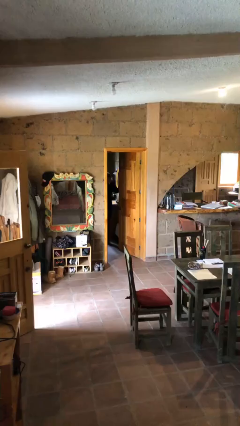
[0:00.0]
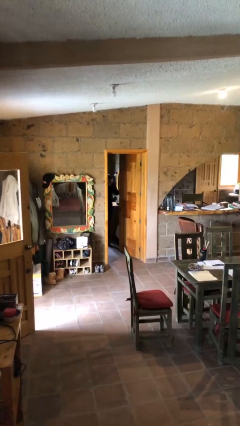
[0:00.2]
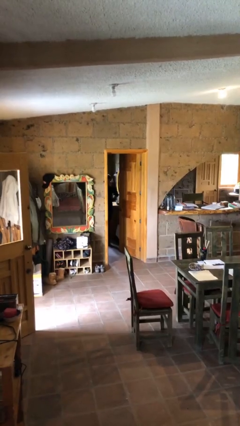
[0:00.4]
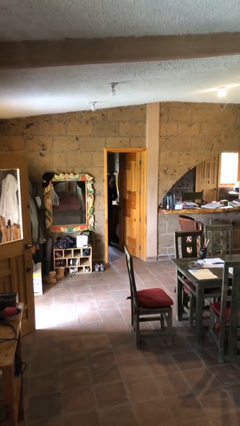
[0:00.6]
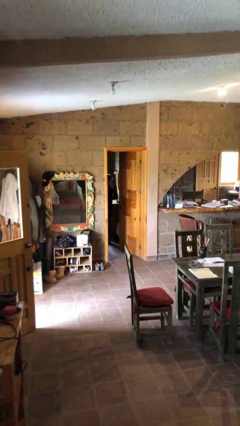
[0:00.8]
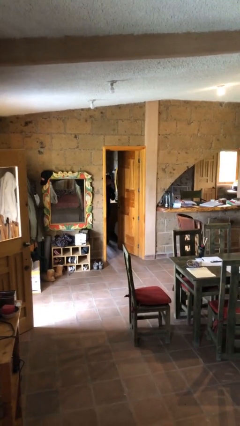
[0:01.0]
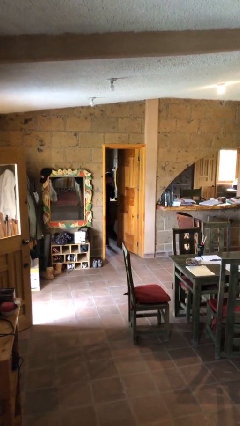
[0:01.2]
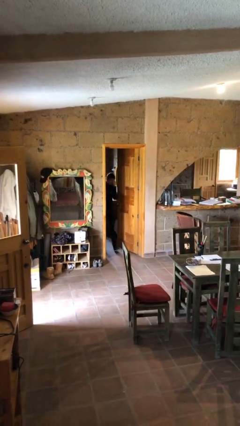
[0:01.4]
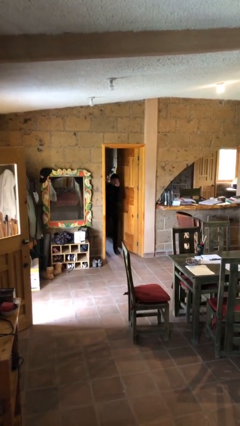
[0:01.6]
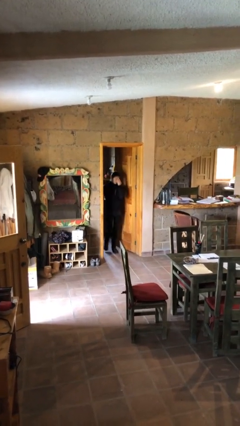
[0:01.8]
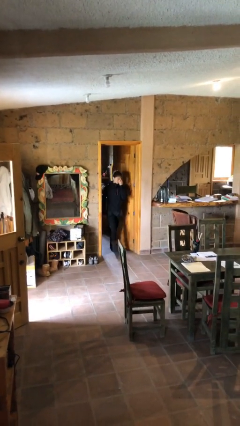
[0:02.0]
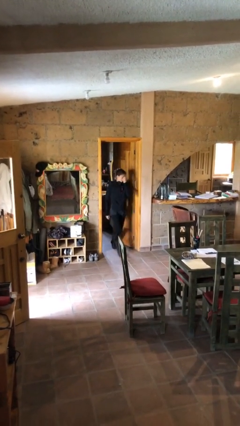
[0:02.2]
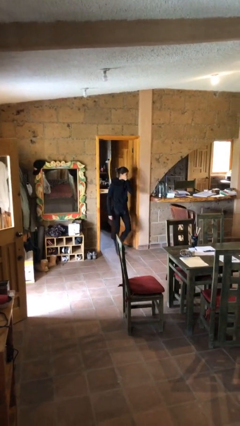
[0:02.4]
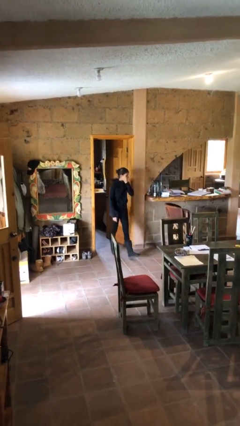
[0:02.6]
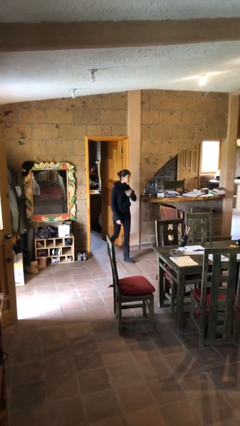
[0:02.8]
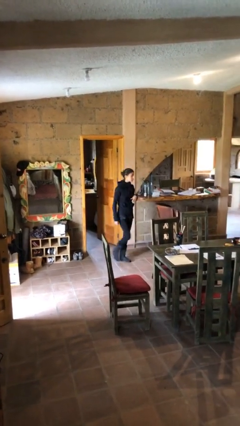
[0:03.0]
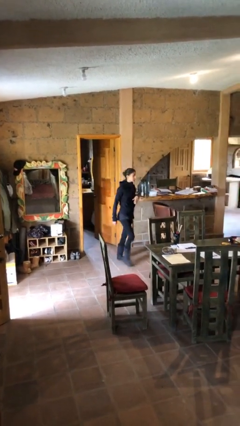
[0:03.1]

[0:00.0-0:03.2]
person enters scene through structure

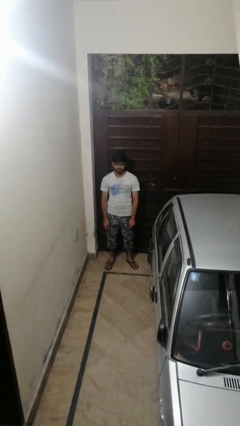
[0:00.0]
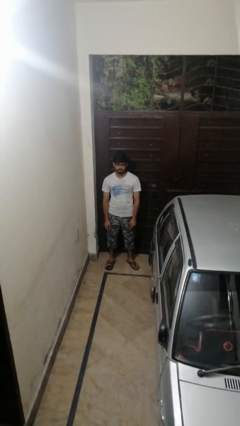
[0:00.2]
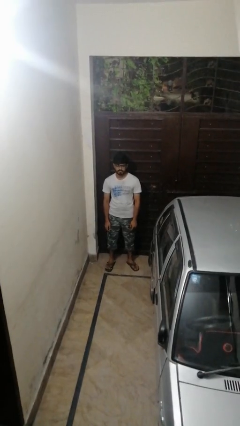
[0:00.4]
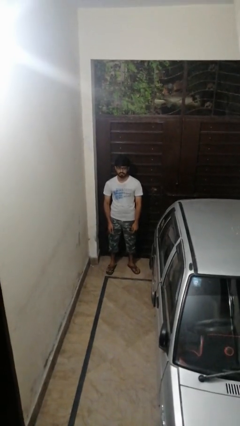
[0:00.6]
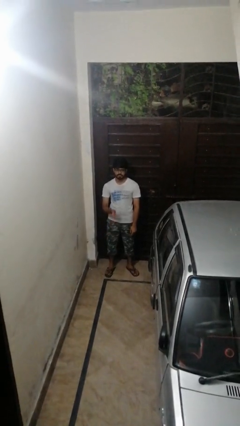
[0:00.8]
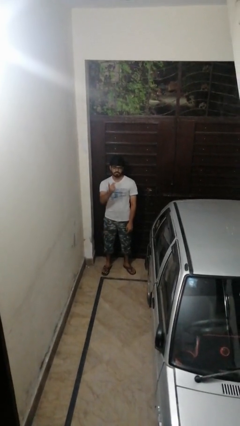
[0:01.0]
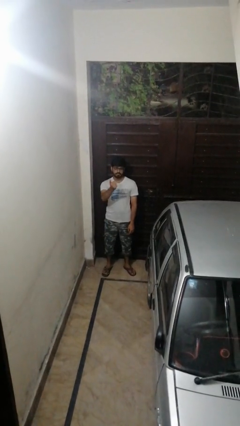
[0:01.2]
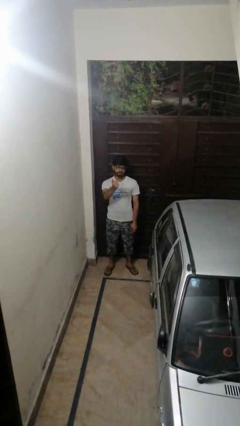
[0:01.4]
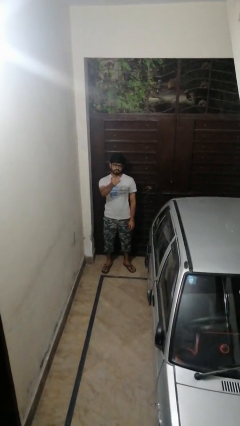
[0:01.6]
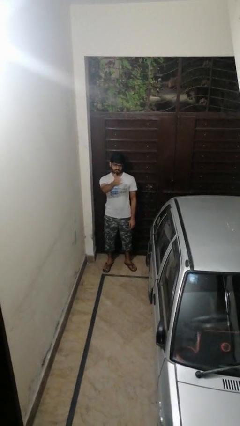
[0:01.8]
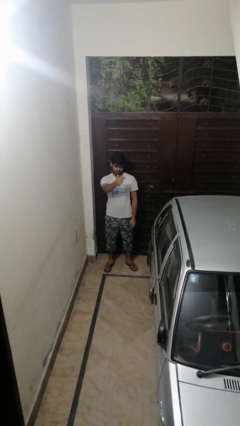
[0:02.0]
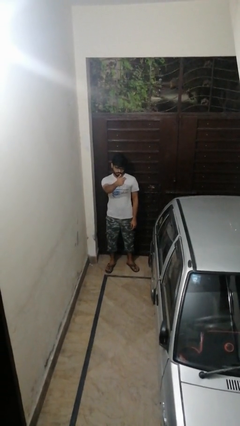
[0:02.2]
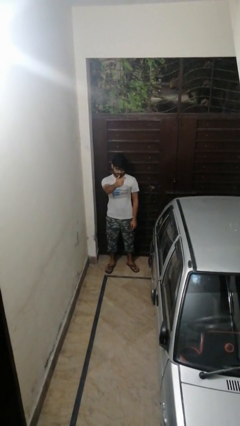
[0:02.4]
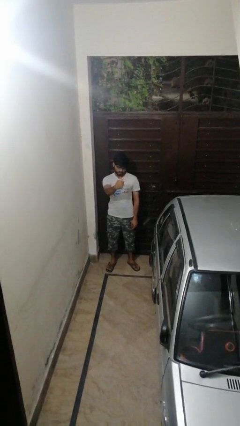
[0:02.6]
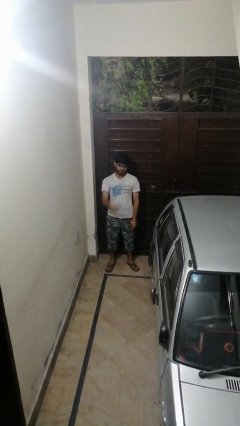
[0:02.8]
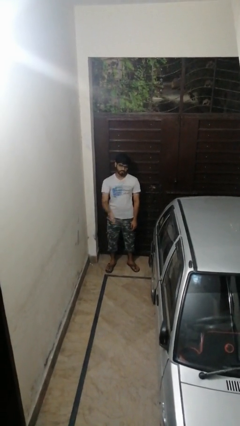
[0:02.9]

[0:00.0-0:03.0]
person gestures come here

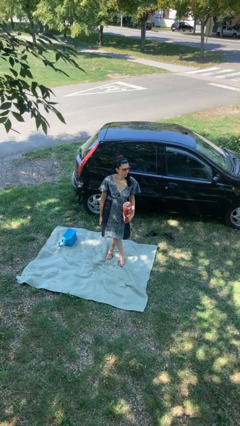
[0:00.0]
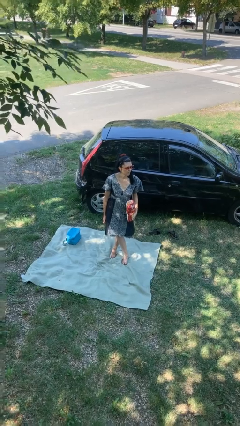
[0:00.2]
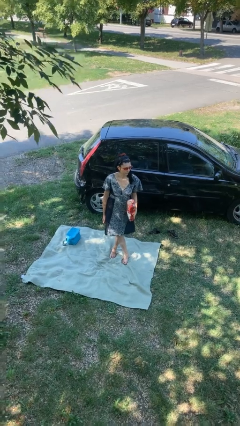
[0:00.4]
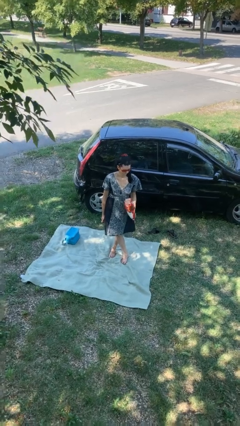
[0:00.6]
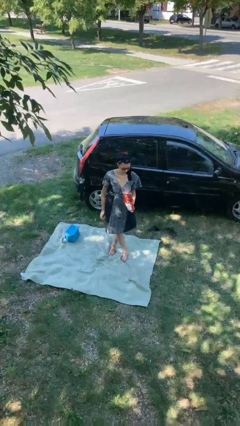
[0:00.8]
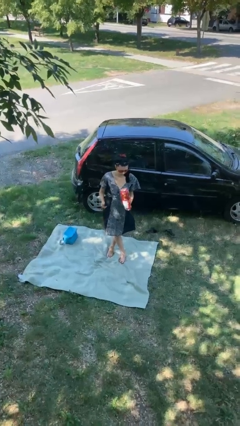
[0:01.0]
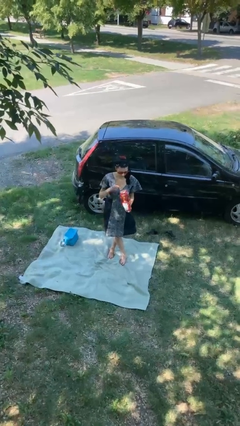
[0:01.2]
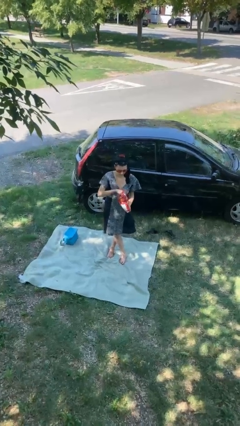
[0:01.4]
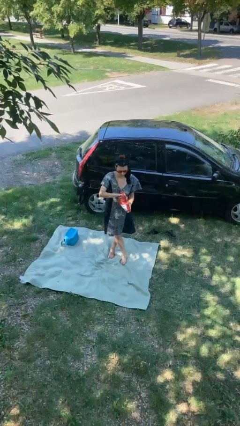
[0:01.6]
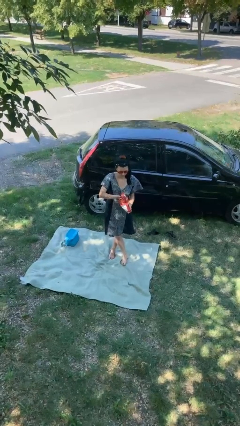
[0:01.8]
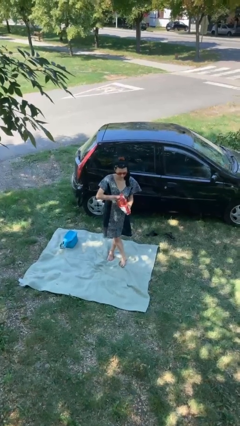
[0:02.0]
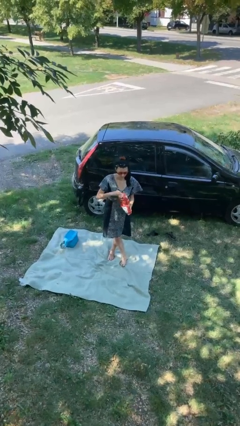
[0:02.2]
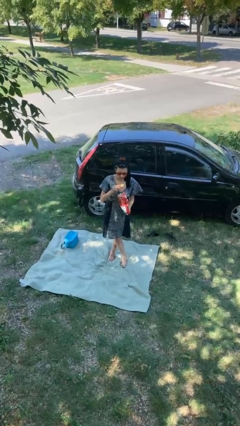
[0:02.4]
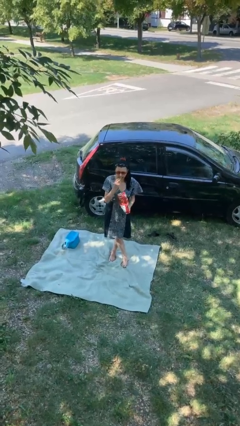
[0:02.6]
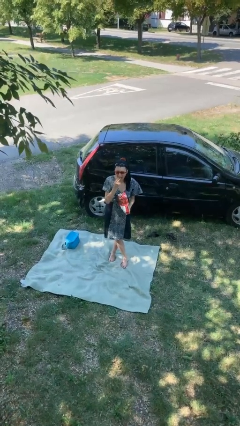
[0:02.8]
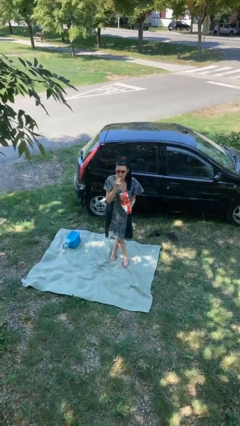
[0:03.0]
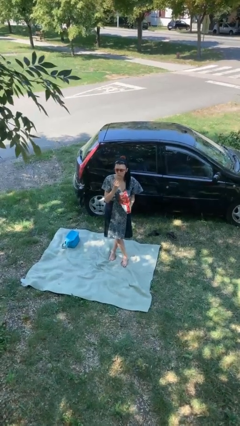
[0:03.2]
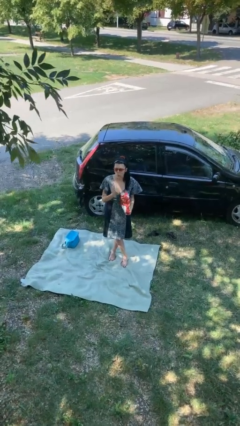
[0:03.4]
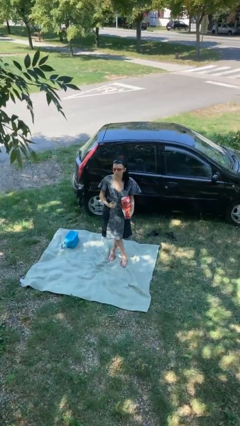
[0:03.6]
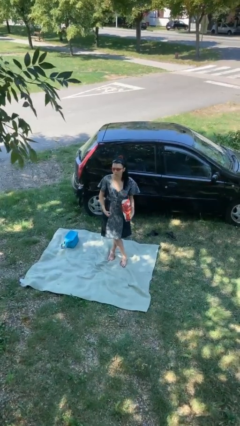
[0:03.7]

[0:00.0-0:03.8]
person eats snack from bag

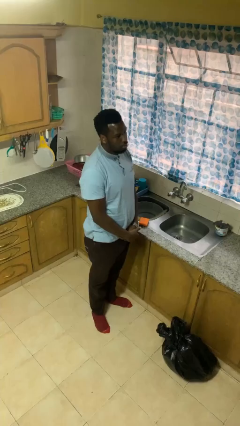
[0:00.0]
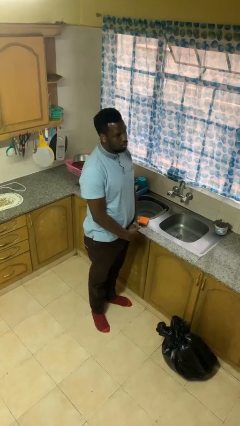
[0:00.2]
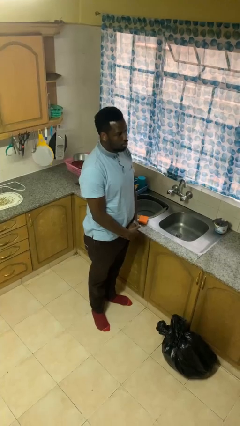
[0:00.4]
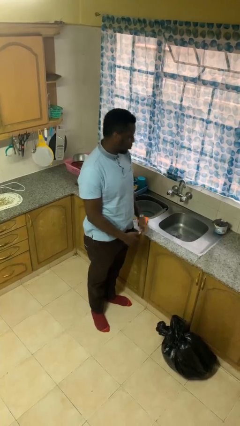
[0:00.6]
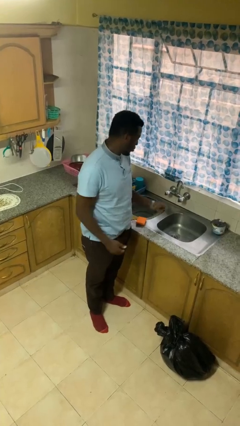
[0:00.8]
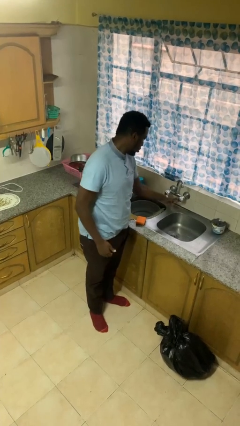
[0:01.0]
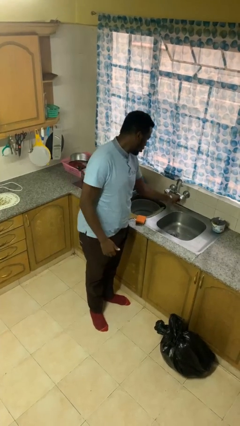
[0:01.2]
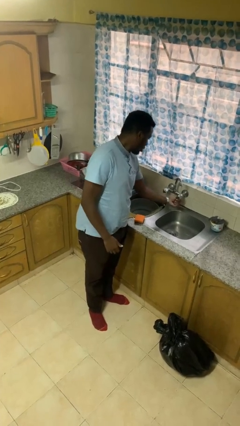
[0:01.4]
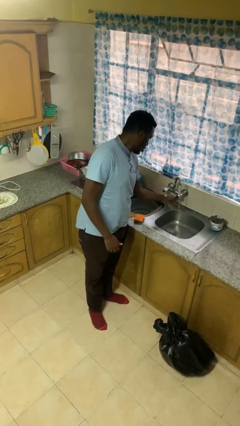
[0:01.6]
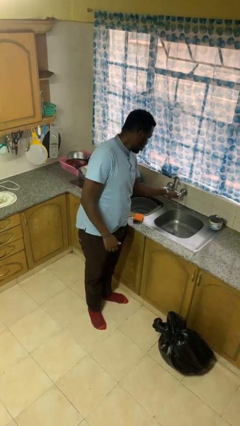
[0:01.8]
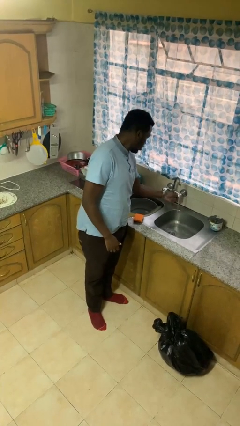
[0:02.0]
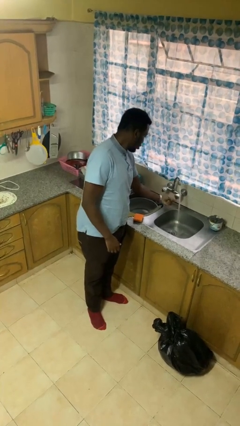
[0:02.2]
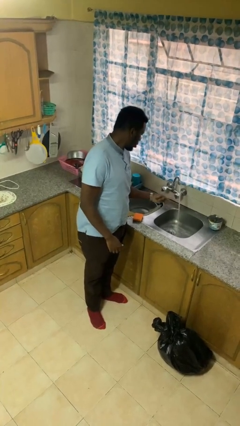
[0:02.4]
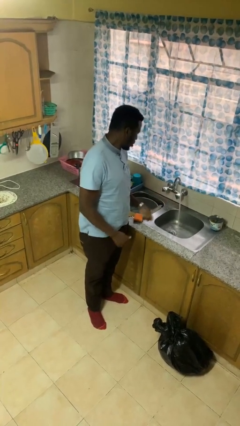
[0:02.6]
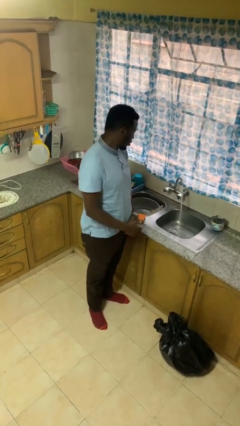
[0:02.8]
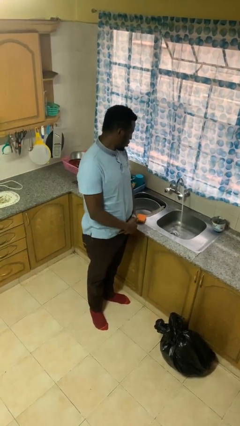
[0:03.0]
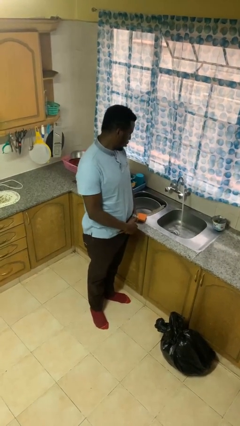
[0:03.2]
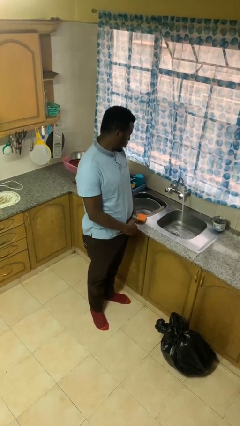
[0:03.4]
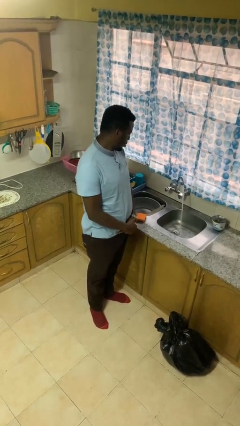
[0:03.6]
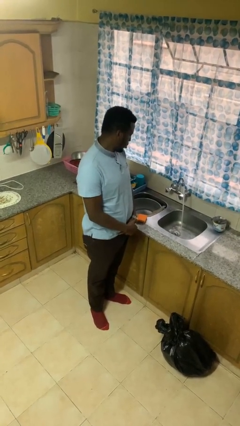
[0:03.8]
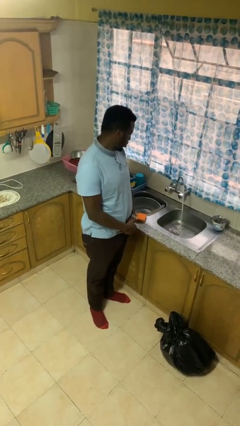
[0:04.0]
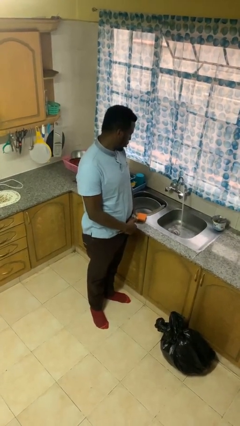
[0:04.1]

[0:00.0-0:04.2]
person turns on faucet

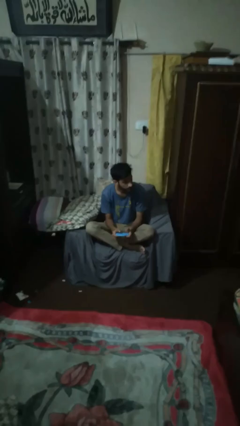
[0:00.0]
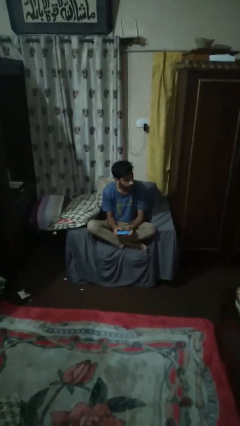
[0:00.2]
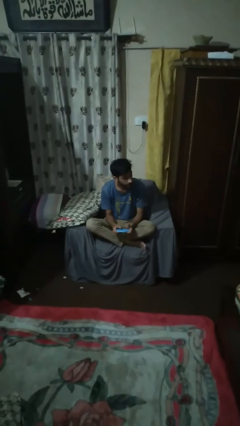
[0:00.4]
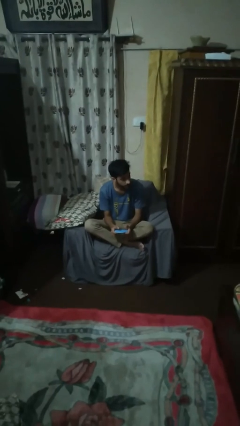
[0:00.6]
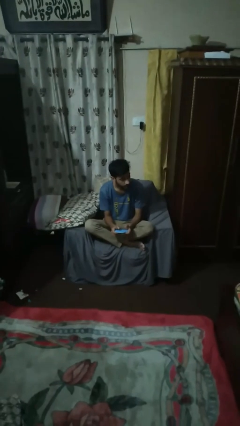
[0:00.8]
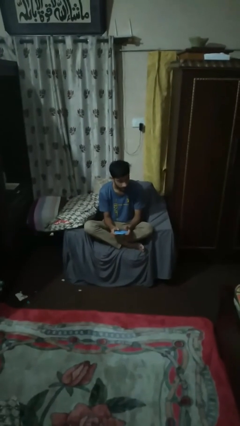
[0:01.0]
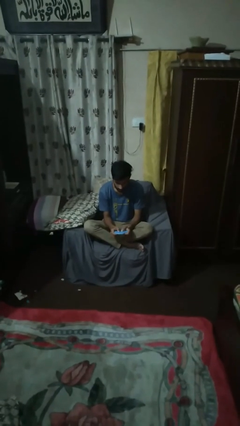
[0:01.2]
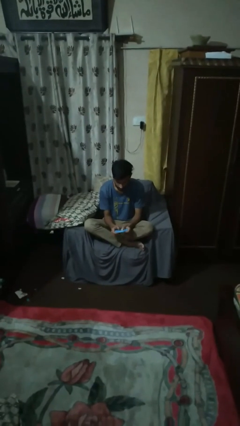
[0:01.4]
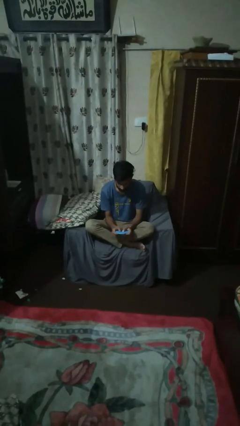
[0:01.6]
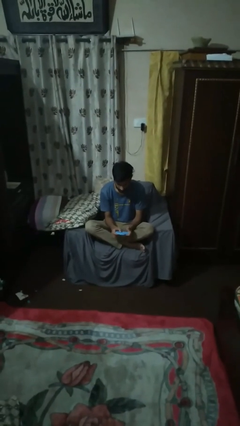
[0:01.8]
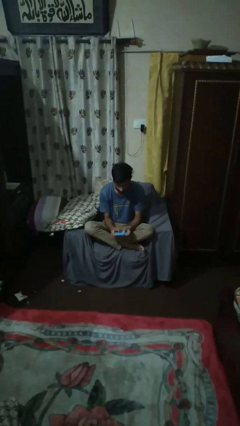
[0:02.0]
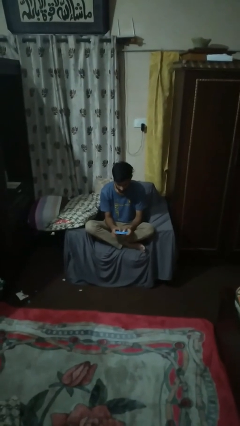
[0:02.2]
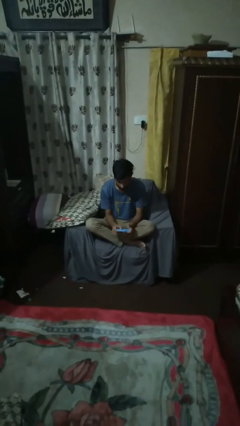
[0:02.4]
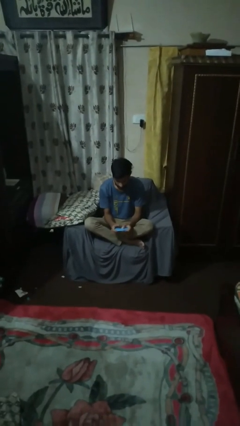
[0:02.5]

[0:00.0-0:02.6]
person interacts with handheld game

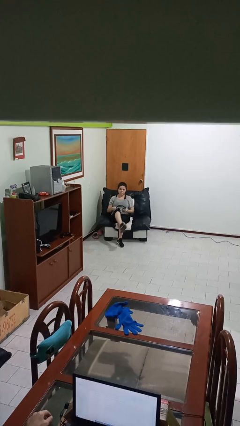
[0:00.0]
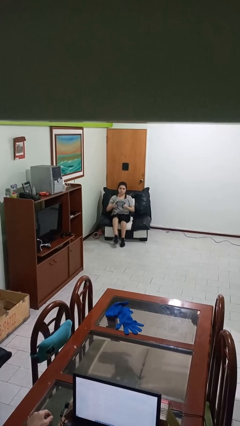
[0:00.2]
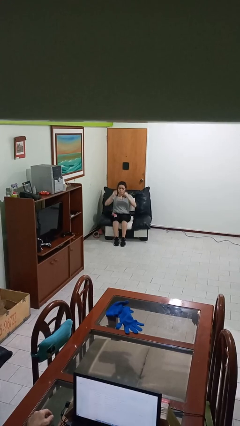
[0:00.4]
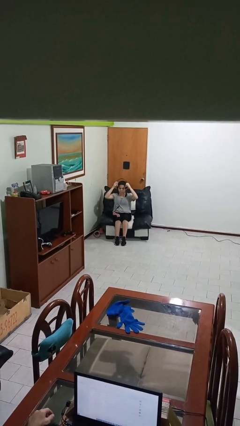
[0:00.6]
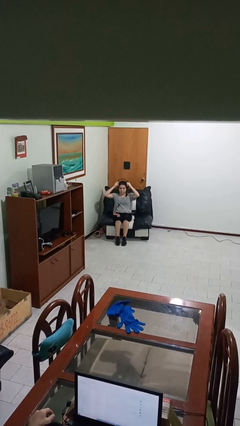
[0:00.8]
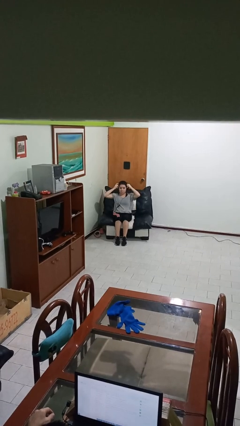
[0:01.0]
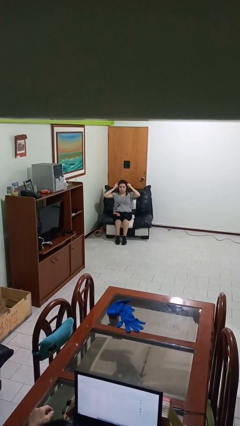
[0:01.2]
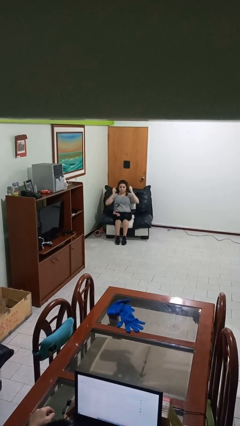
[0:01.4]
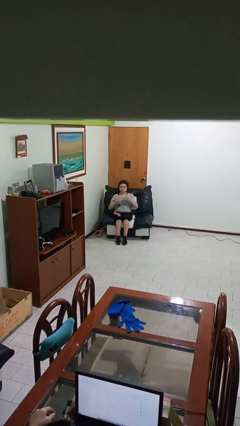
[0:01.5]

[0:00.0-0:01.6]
person puts on headphones
